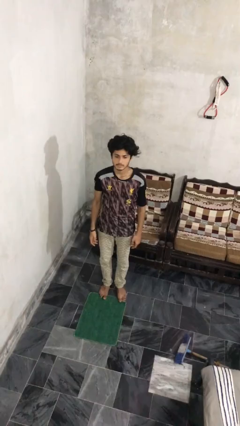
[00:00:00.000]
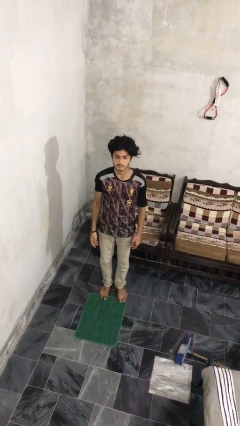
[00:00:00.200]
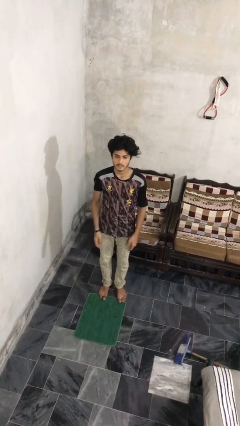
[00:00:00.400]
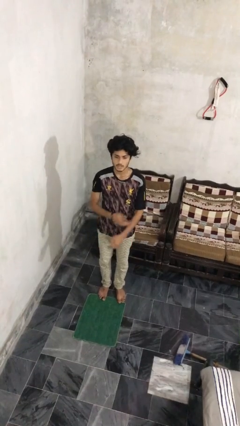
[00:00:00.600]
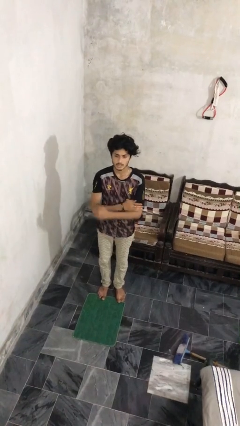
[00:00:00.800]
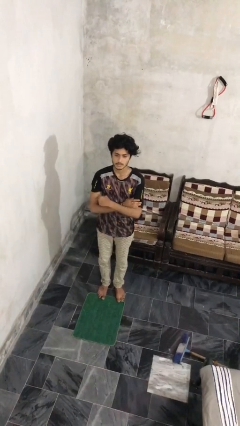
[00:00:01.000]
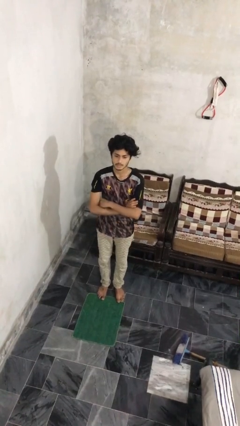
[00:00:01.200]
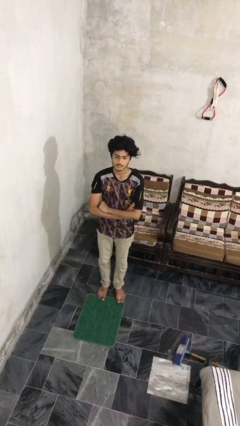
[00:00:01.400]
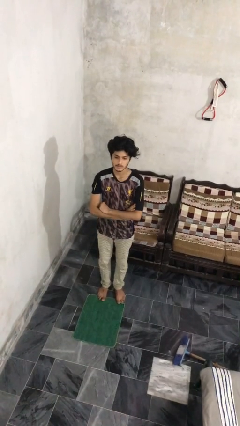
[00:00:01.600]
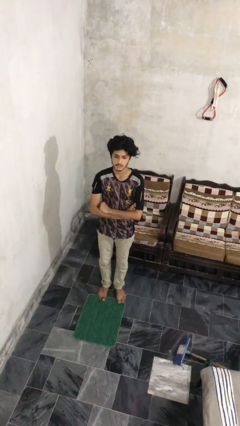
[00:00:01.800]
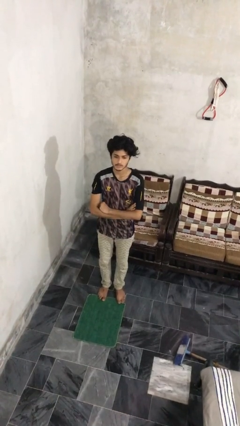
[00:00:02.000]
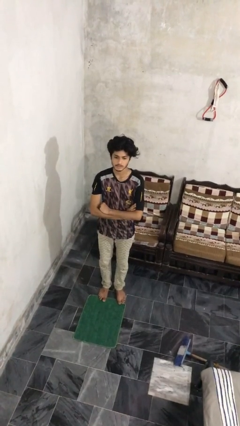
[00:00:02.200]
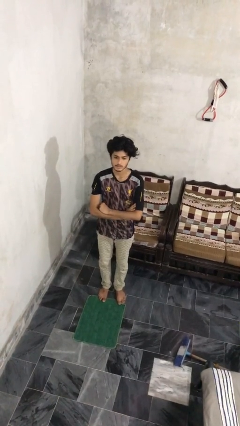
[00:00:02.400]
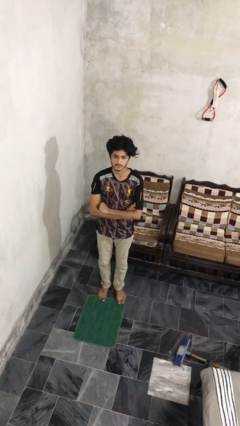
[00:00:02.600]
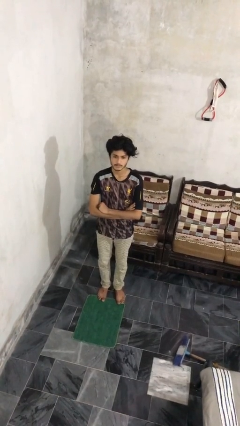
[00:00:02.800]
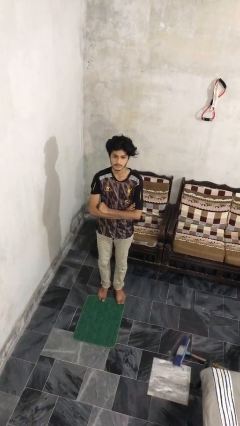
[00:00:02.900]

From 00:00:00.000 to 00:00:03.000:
person crosses arms

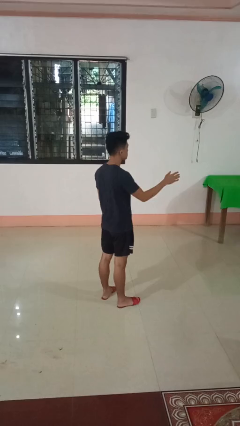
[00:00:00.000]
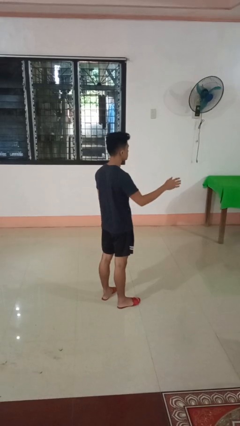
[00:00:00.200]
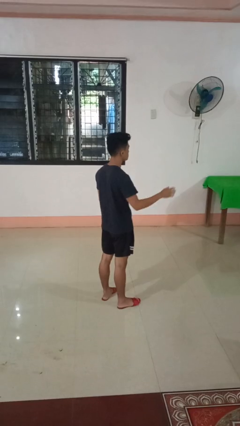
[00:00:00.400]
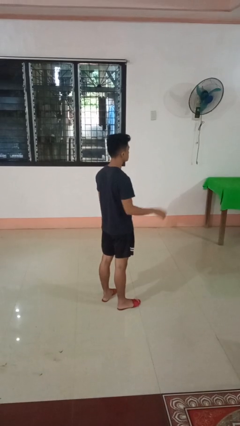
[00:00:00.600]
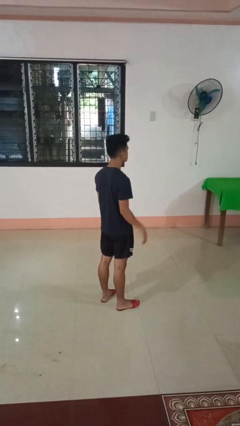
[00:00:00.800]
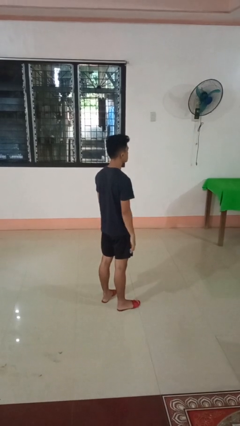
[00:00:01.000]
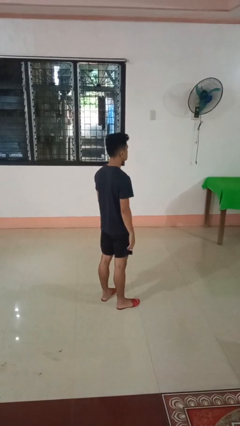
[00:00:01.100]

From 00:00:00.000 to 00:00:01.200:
person gestures swipe right

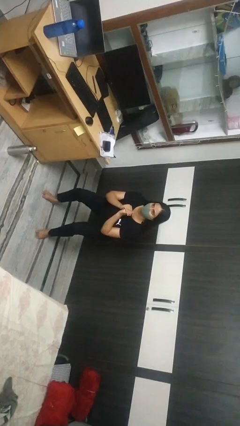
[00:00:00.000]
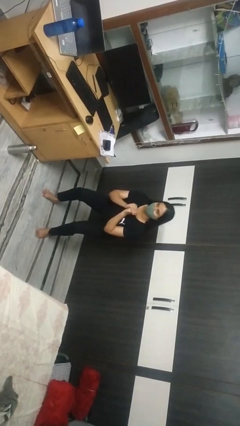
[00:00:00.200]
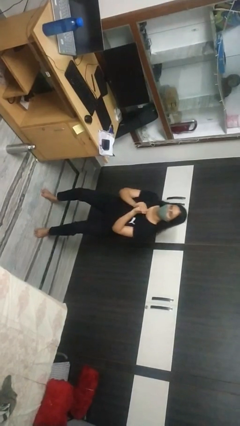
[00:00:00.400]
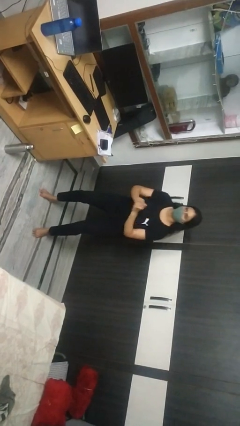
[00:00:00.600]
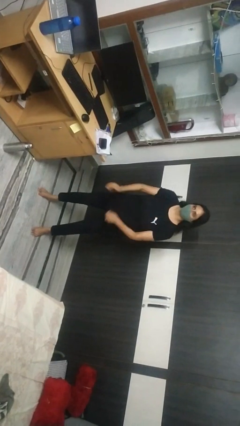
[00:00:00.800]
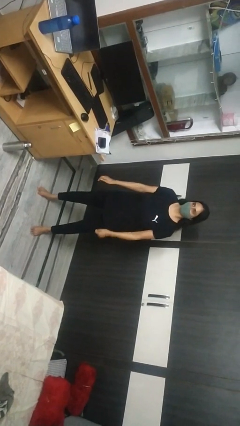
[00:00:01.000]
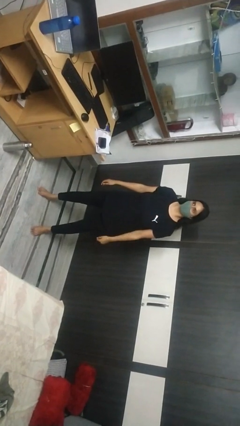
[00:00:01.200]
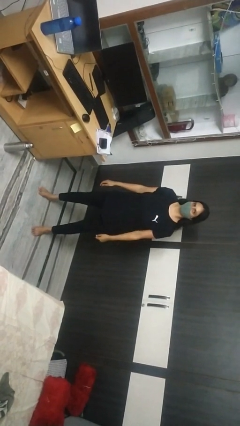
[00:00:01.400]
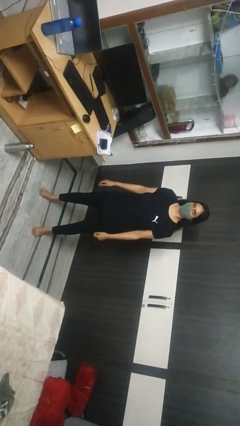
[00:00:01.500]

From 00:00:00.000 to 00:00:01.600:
person stands up

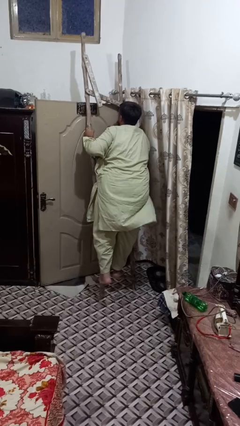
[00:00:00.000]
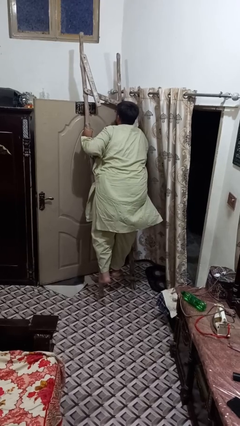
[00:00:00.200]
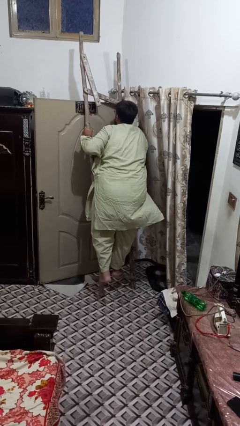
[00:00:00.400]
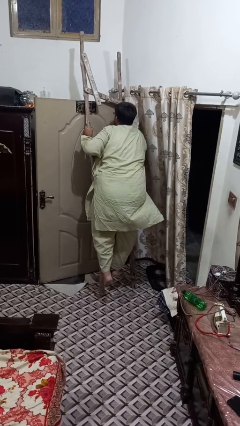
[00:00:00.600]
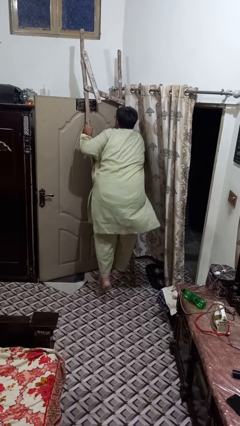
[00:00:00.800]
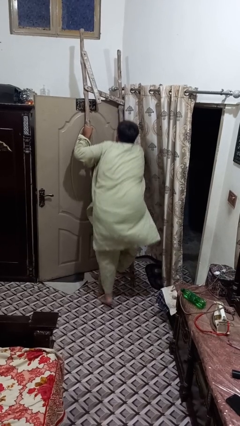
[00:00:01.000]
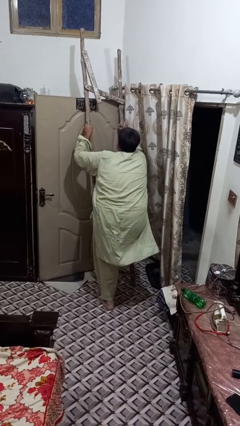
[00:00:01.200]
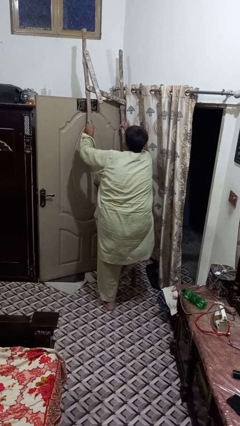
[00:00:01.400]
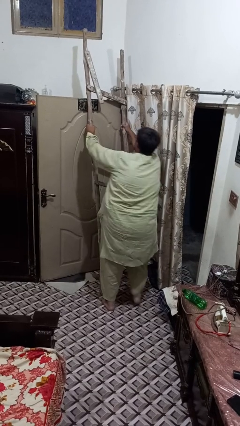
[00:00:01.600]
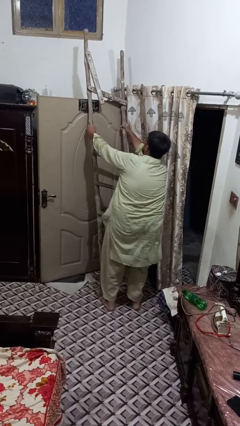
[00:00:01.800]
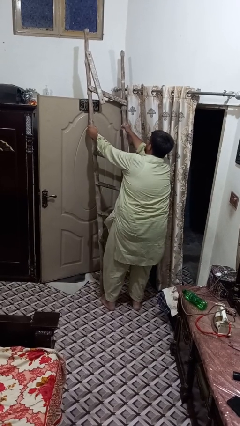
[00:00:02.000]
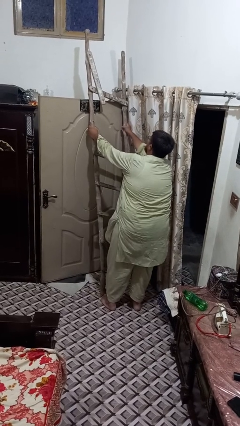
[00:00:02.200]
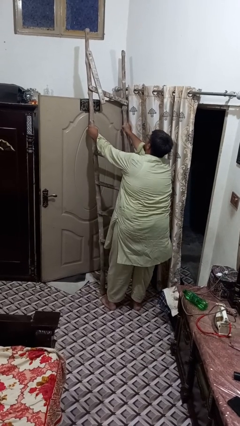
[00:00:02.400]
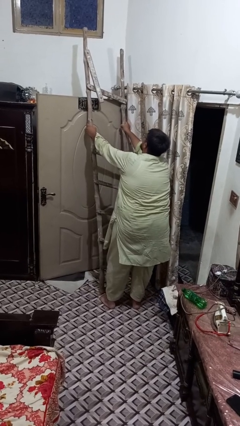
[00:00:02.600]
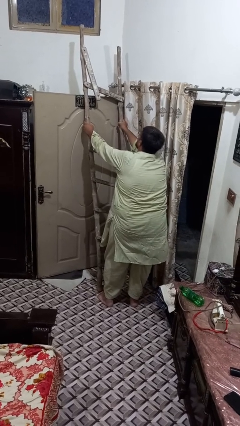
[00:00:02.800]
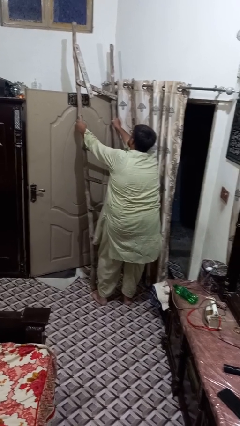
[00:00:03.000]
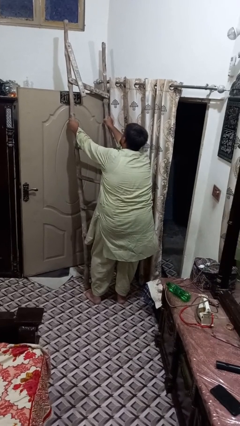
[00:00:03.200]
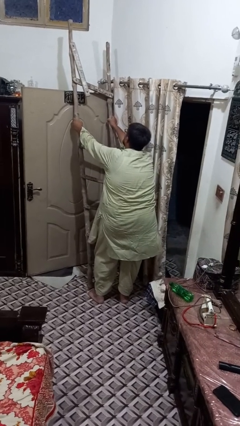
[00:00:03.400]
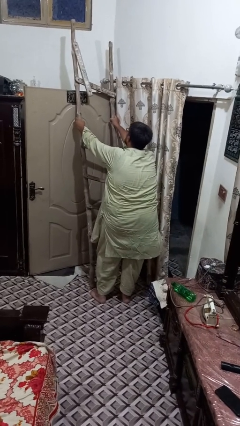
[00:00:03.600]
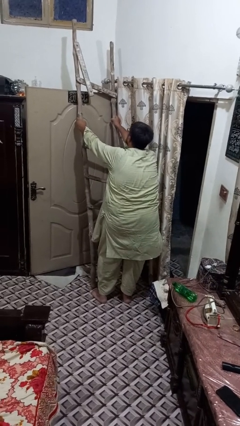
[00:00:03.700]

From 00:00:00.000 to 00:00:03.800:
person climbs down ladder

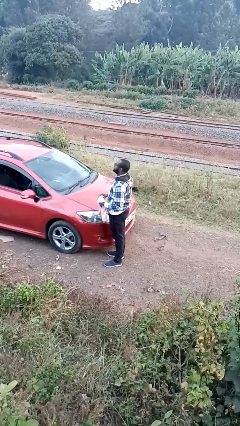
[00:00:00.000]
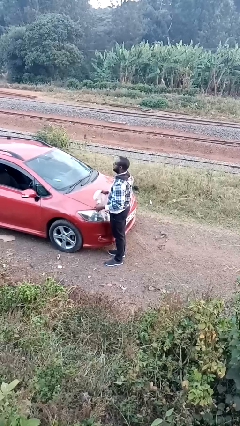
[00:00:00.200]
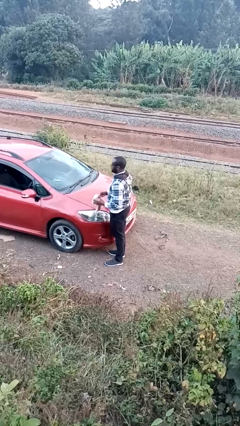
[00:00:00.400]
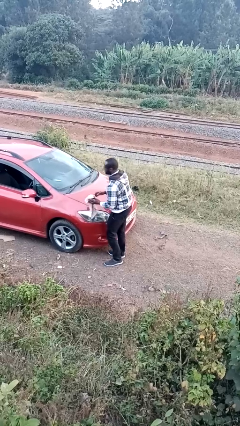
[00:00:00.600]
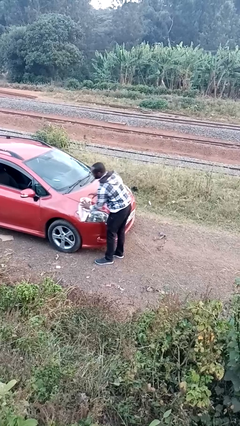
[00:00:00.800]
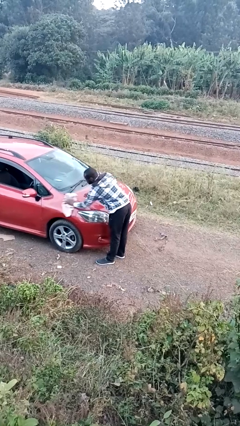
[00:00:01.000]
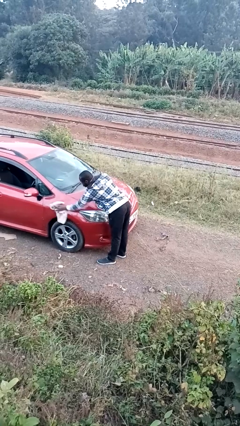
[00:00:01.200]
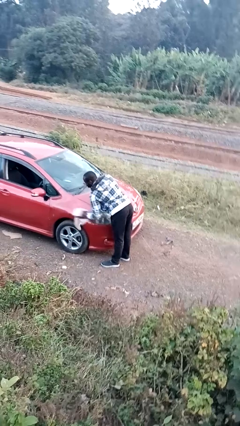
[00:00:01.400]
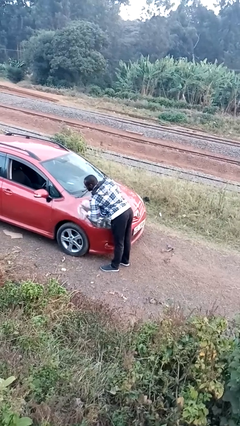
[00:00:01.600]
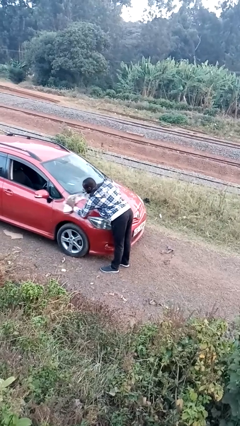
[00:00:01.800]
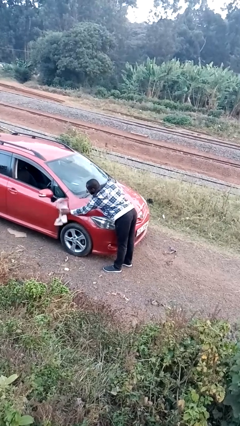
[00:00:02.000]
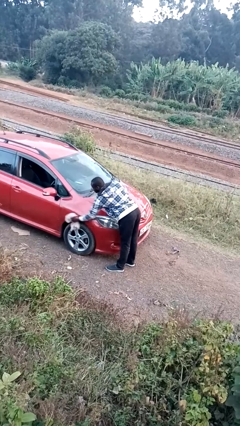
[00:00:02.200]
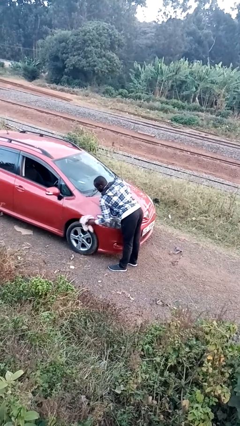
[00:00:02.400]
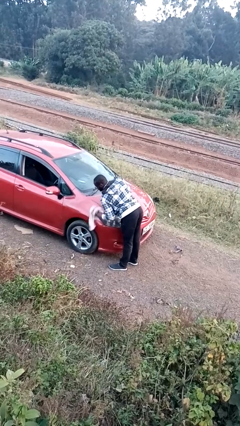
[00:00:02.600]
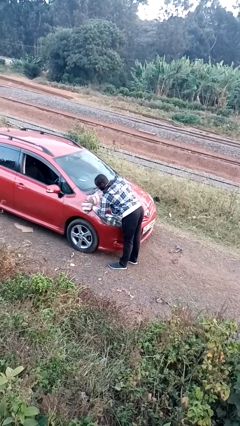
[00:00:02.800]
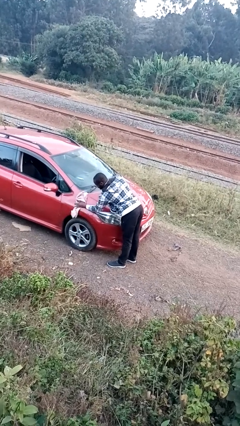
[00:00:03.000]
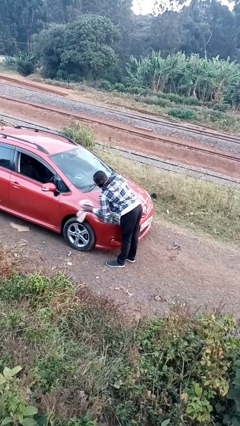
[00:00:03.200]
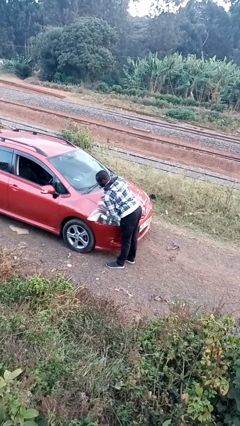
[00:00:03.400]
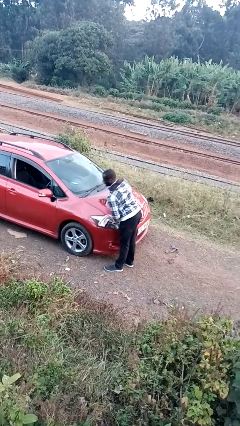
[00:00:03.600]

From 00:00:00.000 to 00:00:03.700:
person polishes car with rag

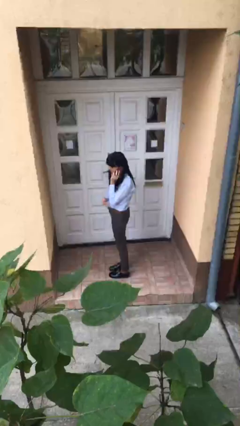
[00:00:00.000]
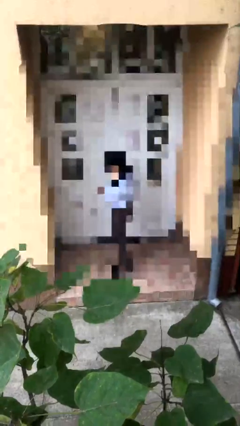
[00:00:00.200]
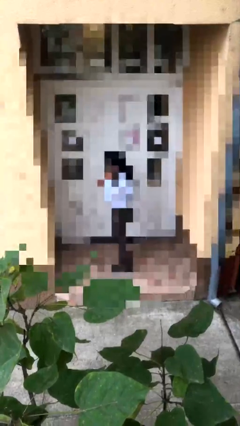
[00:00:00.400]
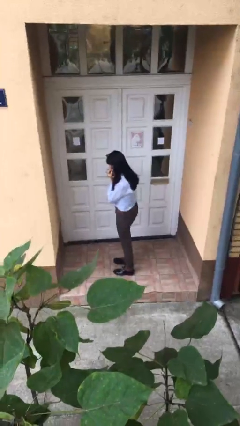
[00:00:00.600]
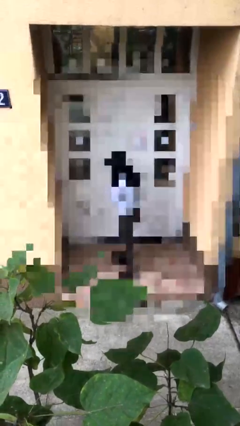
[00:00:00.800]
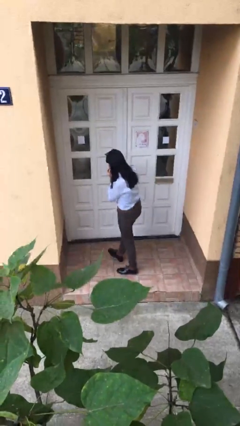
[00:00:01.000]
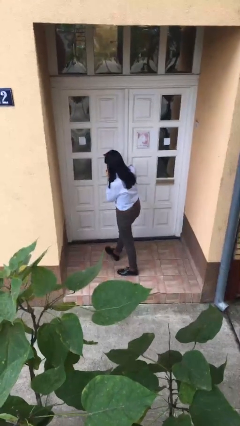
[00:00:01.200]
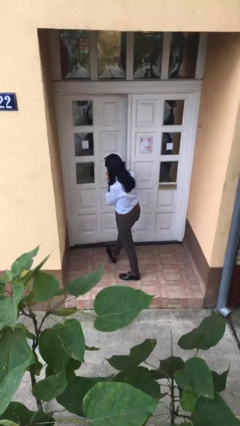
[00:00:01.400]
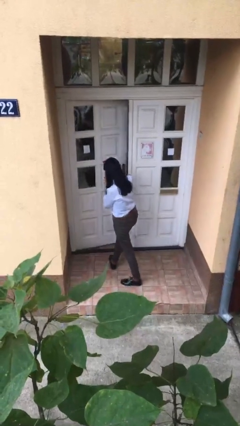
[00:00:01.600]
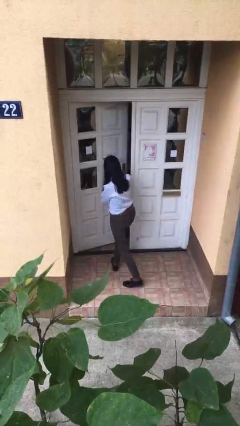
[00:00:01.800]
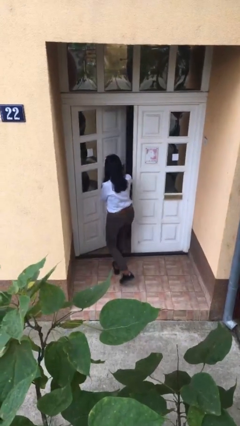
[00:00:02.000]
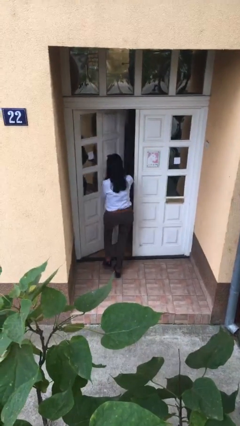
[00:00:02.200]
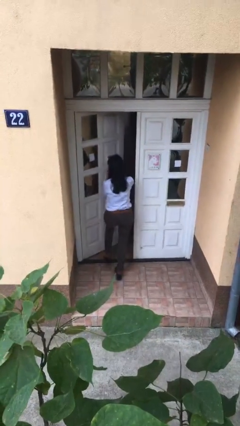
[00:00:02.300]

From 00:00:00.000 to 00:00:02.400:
person opens facility door

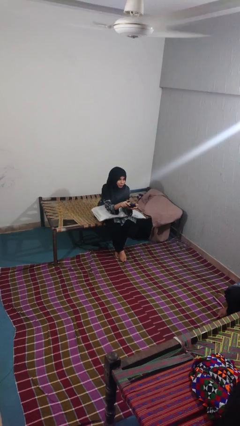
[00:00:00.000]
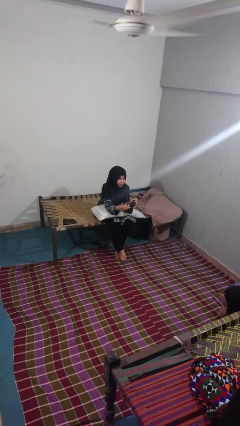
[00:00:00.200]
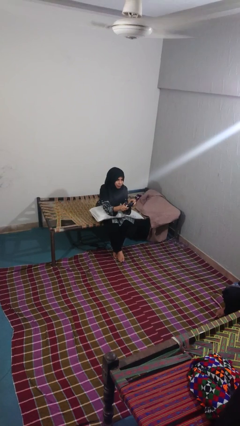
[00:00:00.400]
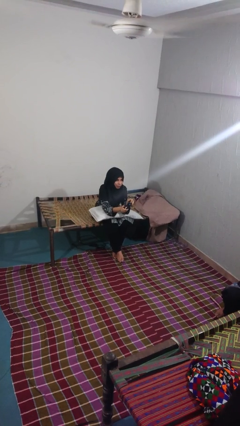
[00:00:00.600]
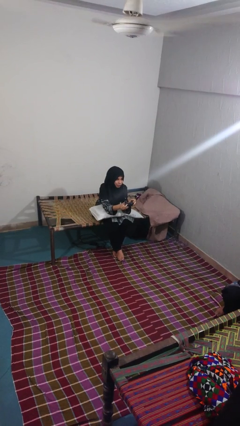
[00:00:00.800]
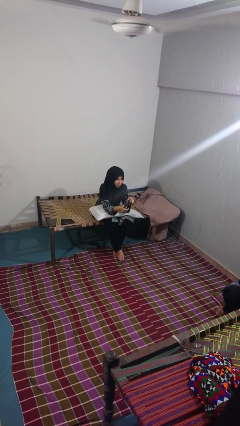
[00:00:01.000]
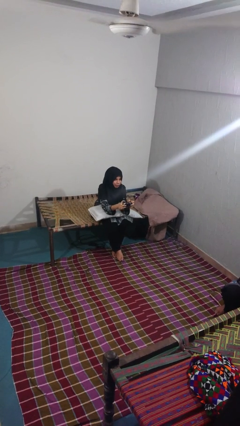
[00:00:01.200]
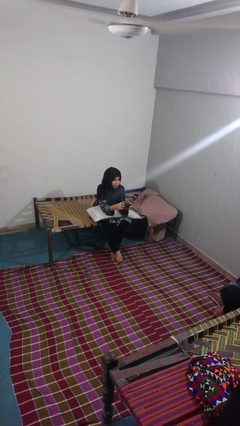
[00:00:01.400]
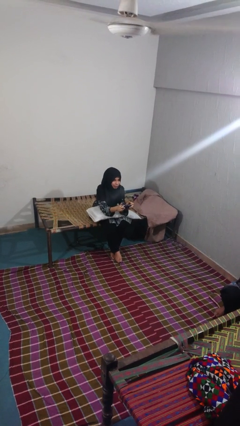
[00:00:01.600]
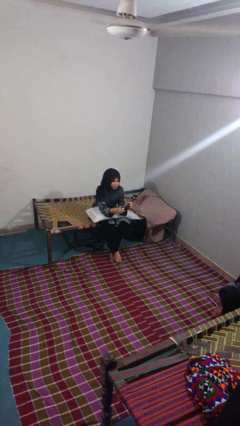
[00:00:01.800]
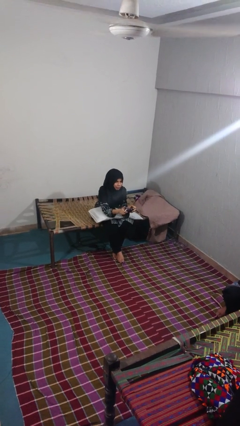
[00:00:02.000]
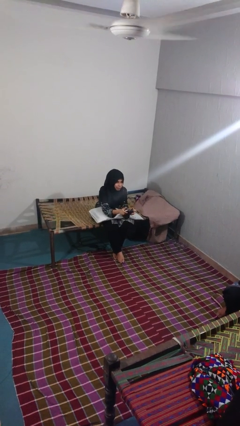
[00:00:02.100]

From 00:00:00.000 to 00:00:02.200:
person interacts with handheld game
